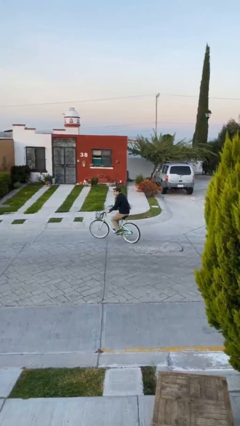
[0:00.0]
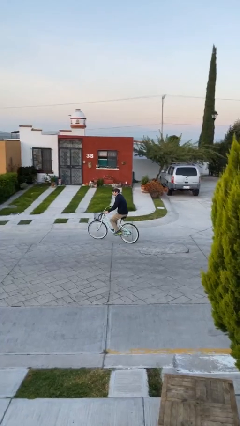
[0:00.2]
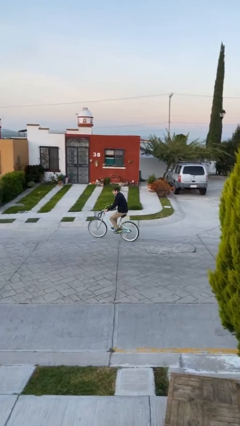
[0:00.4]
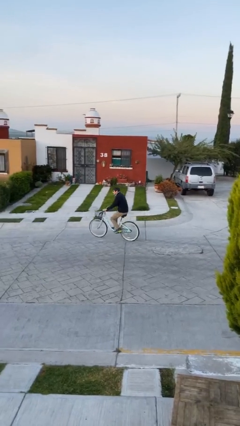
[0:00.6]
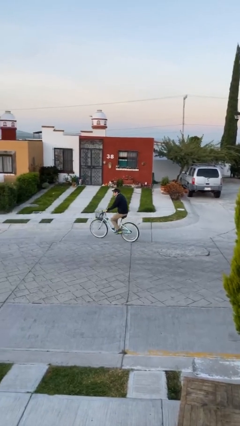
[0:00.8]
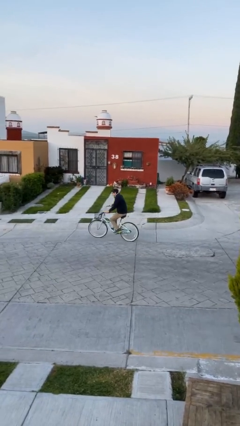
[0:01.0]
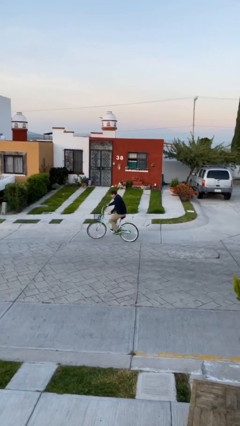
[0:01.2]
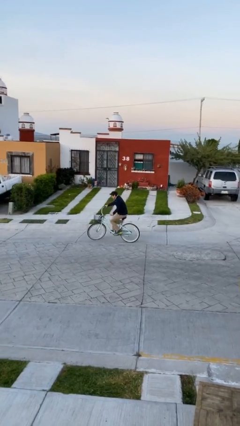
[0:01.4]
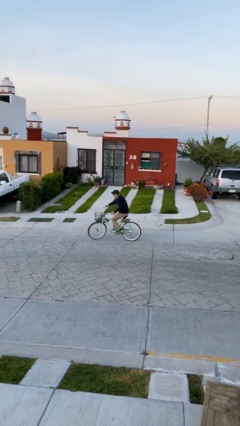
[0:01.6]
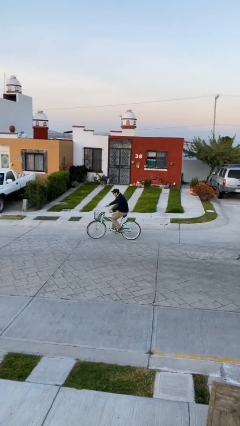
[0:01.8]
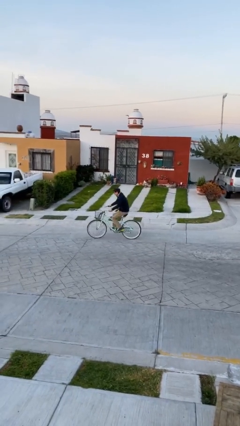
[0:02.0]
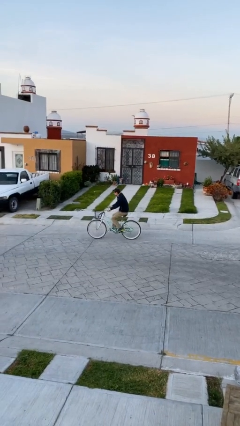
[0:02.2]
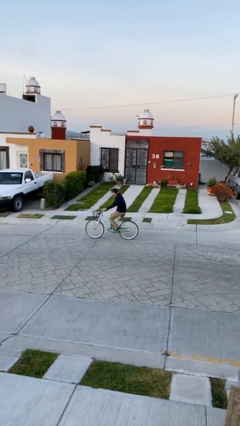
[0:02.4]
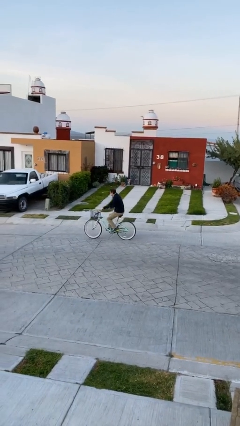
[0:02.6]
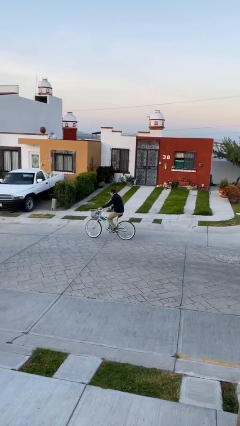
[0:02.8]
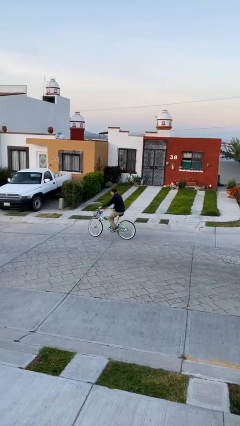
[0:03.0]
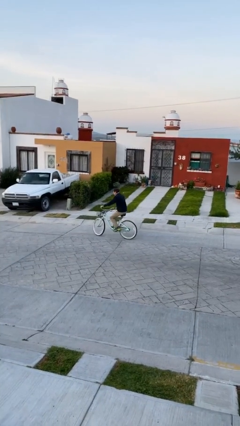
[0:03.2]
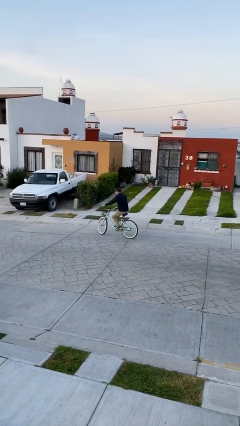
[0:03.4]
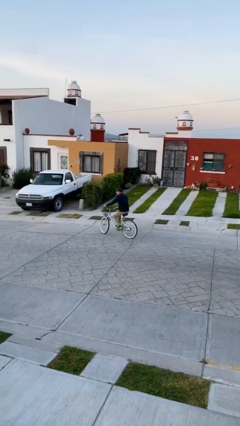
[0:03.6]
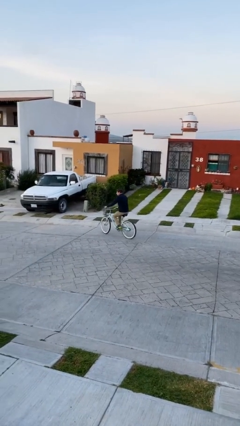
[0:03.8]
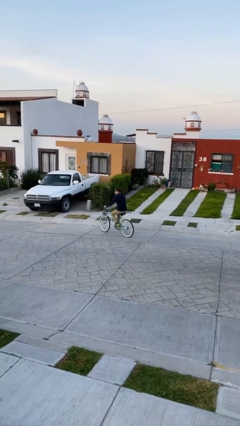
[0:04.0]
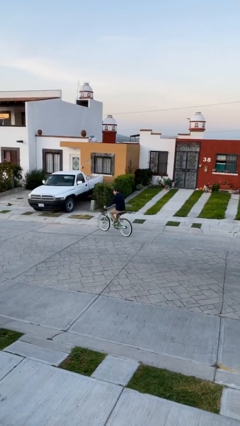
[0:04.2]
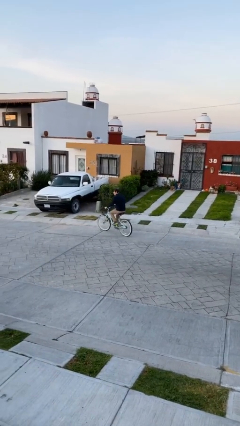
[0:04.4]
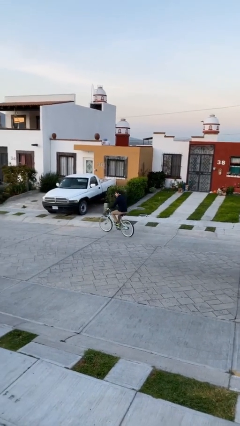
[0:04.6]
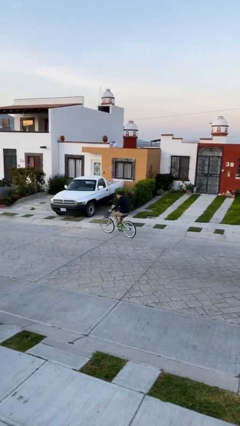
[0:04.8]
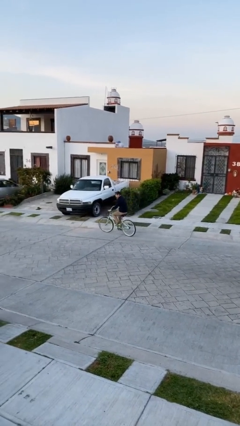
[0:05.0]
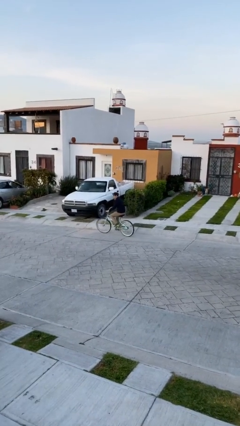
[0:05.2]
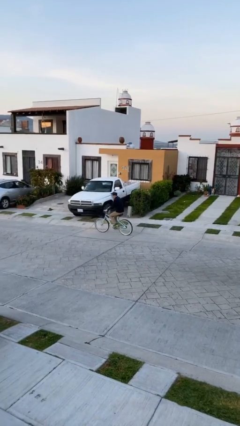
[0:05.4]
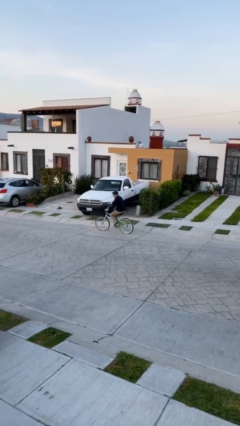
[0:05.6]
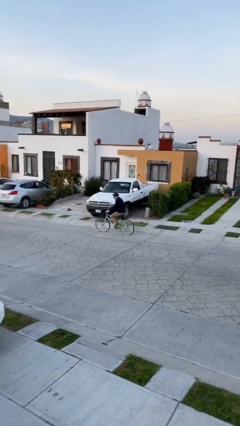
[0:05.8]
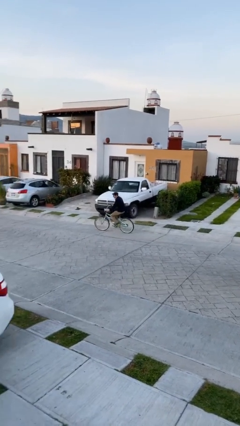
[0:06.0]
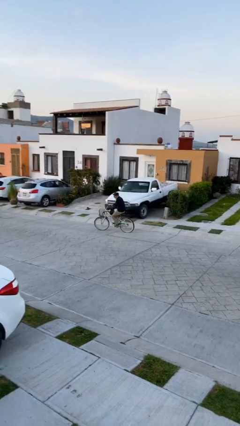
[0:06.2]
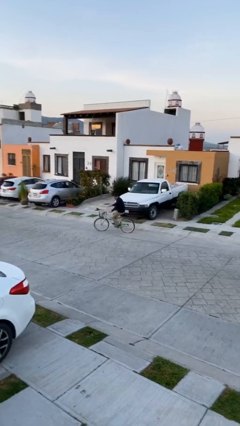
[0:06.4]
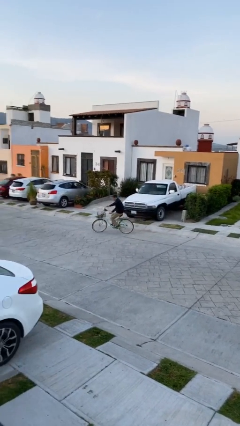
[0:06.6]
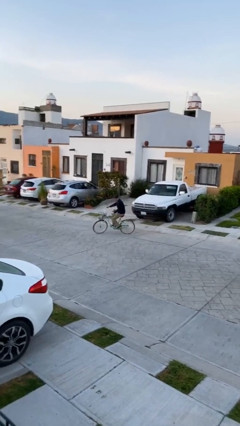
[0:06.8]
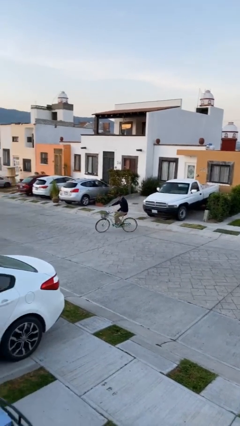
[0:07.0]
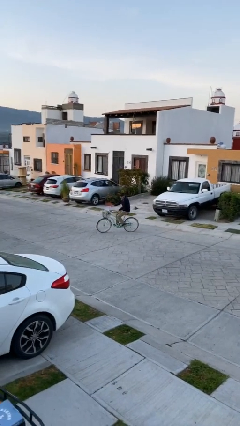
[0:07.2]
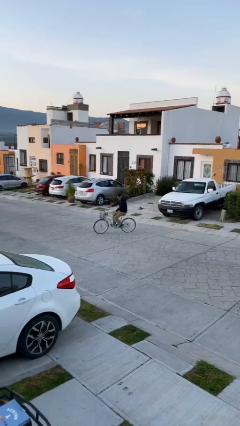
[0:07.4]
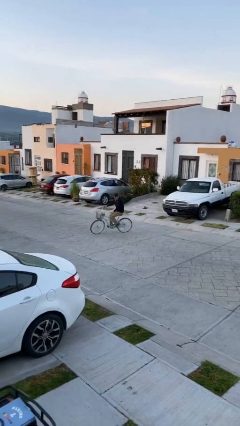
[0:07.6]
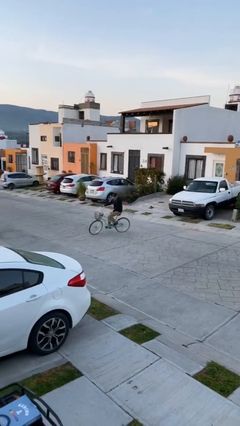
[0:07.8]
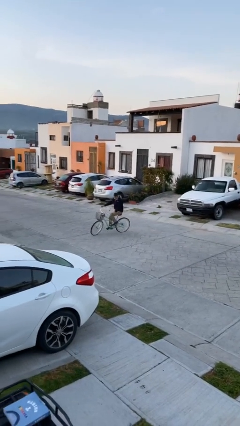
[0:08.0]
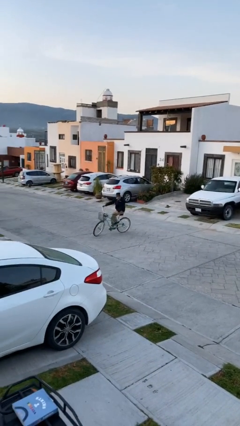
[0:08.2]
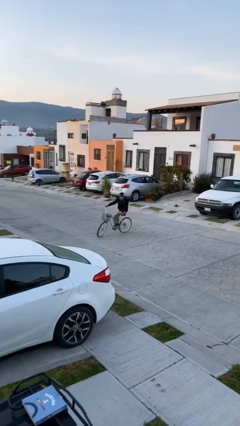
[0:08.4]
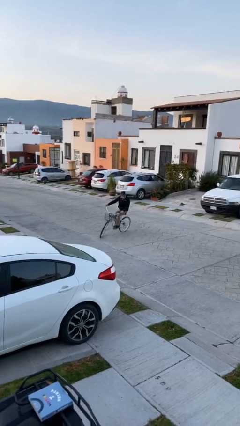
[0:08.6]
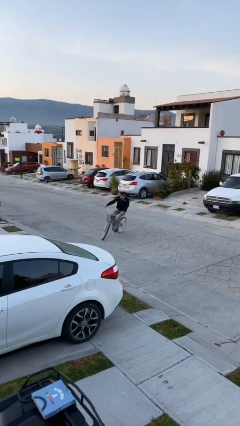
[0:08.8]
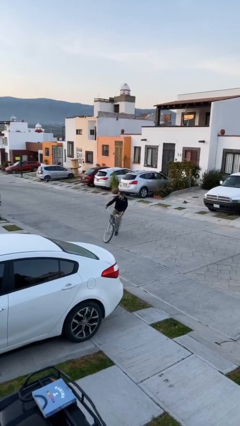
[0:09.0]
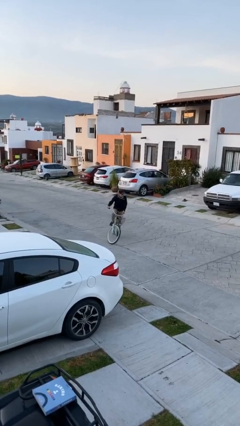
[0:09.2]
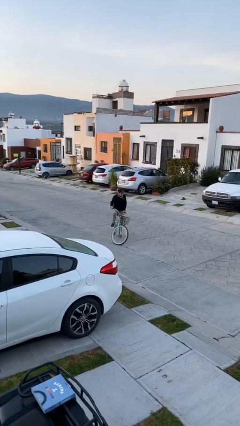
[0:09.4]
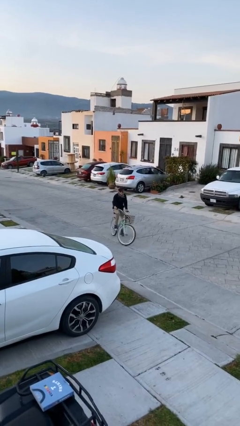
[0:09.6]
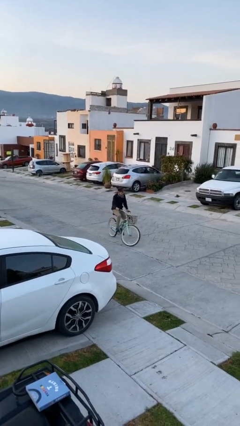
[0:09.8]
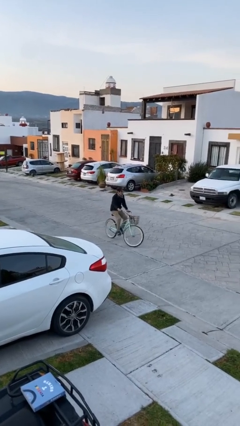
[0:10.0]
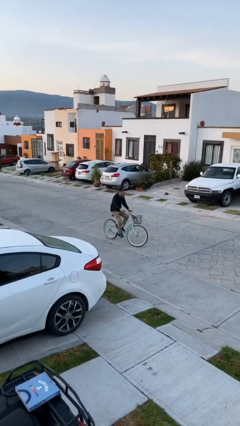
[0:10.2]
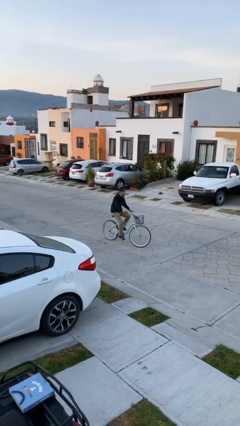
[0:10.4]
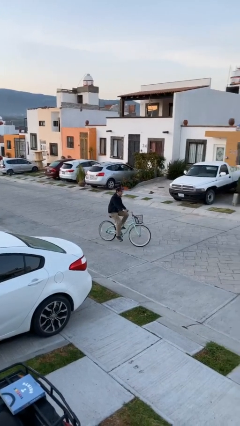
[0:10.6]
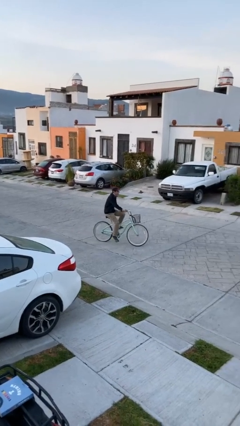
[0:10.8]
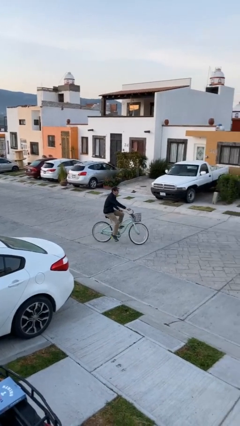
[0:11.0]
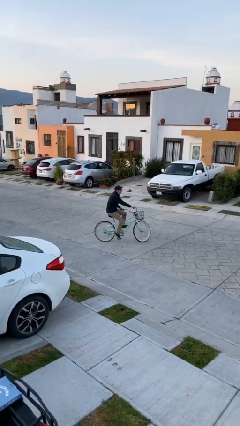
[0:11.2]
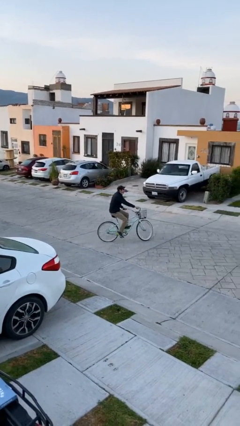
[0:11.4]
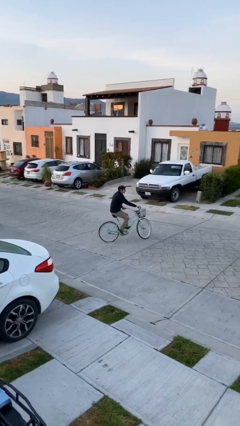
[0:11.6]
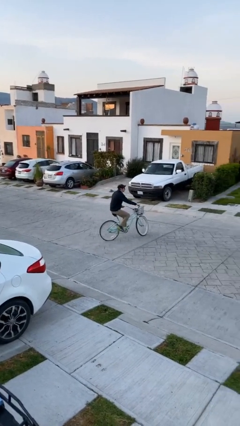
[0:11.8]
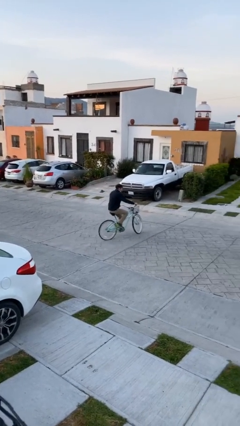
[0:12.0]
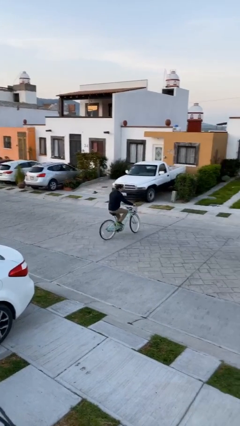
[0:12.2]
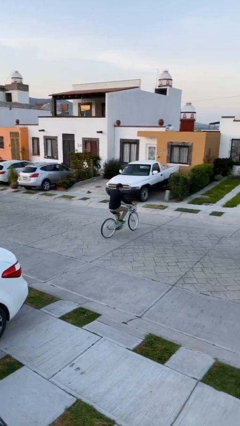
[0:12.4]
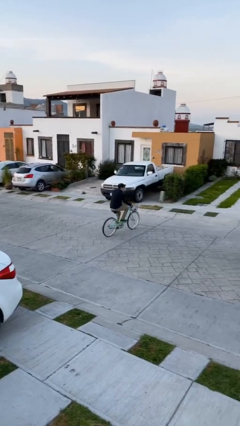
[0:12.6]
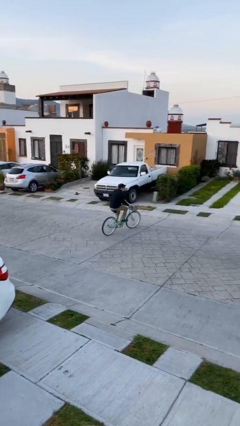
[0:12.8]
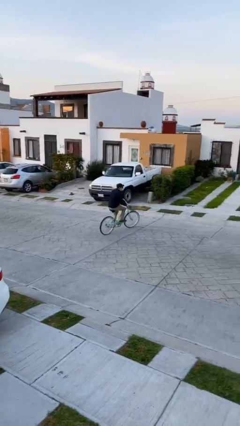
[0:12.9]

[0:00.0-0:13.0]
person rides bicycle

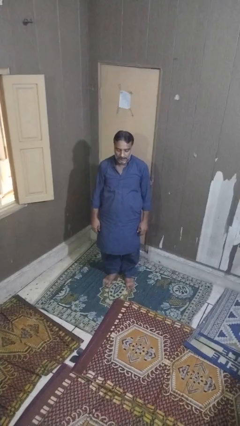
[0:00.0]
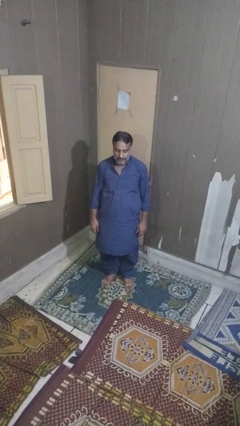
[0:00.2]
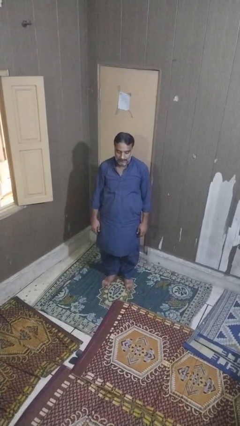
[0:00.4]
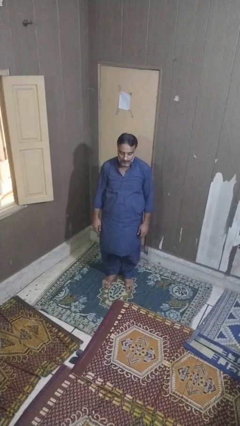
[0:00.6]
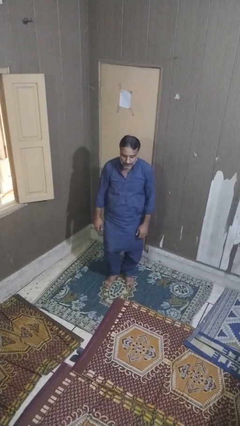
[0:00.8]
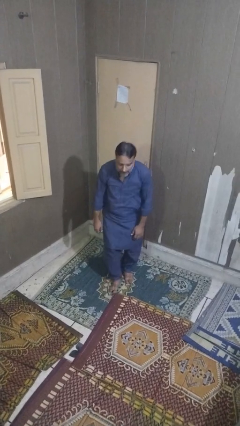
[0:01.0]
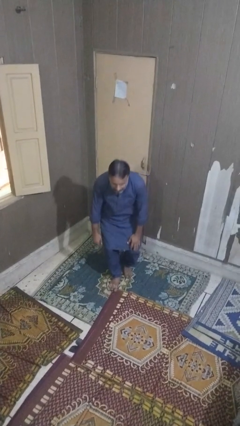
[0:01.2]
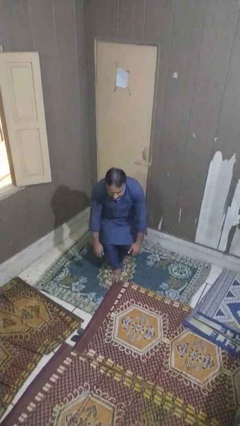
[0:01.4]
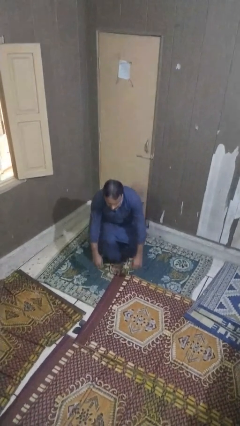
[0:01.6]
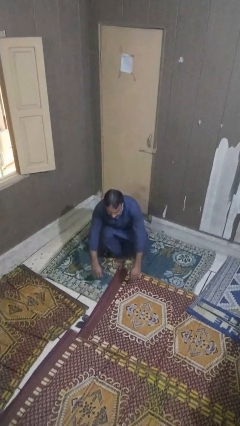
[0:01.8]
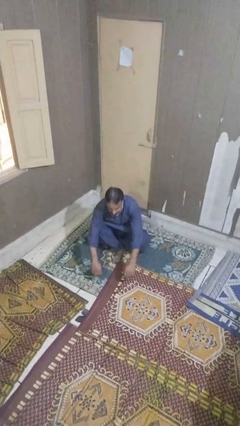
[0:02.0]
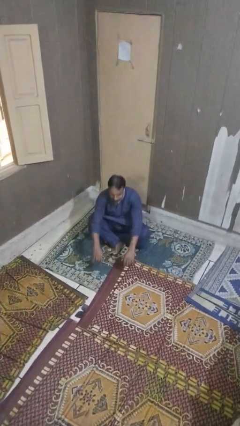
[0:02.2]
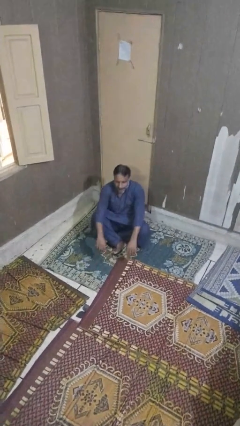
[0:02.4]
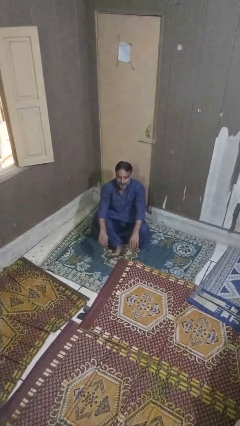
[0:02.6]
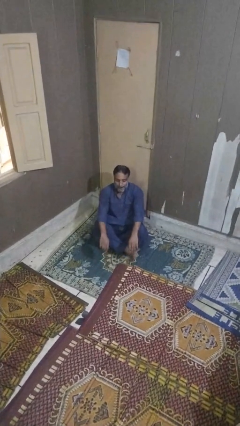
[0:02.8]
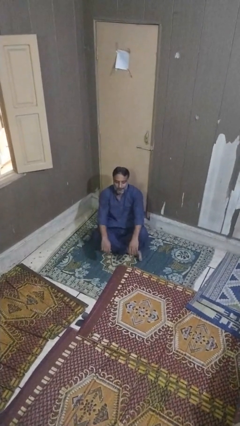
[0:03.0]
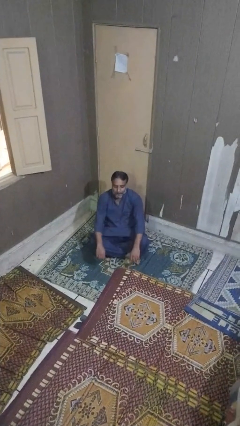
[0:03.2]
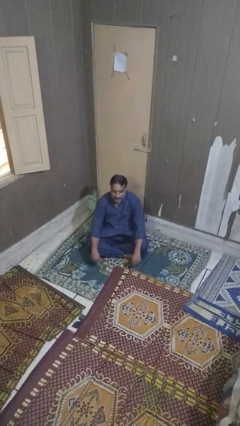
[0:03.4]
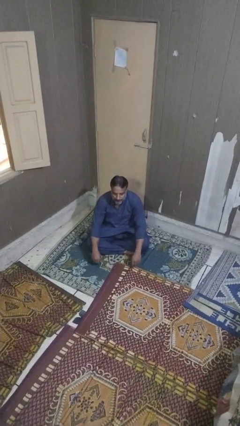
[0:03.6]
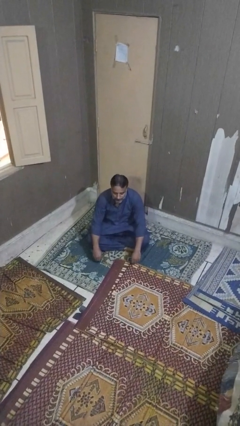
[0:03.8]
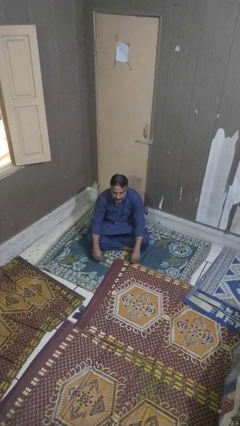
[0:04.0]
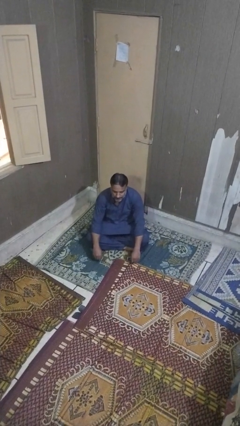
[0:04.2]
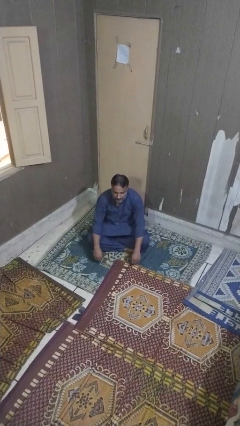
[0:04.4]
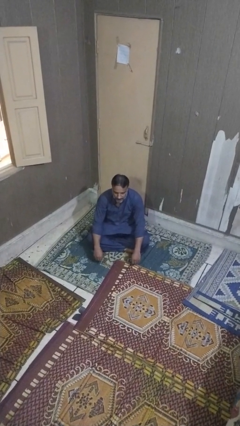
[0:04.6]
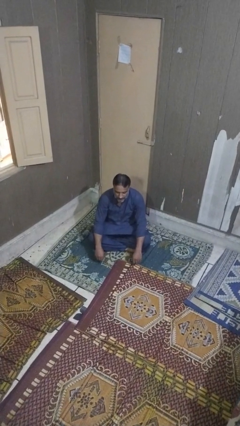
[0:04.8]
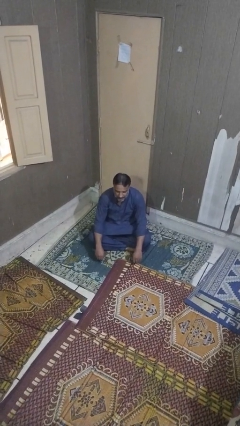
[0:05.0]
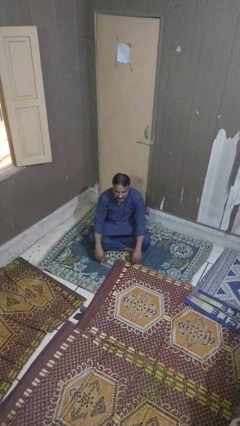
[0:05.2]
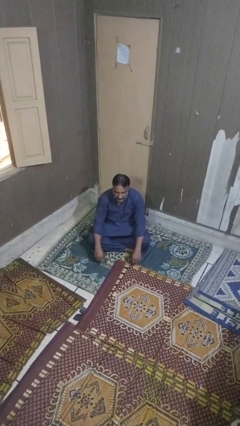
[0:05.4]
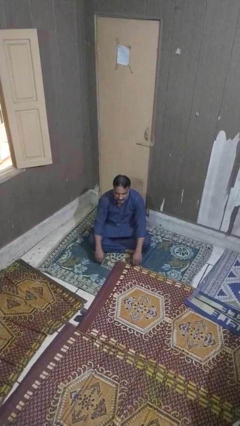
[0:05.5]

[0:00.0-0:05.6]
person sits crisscross
